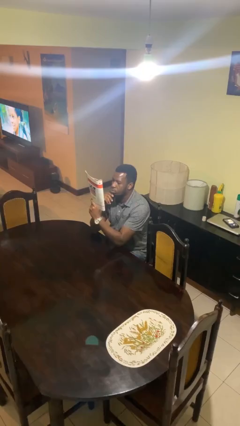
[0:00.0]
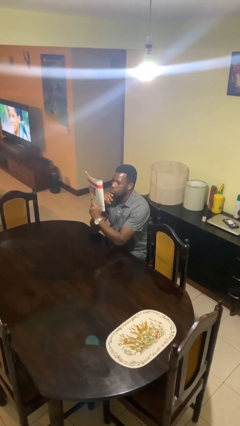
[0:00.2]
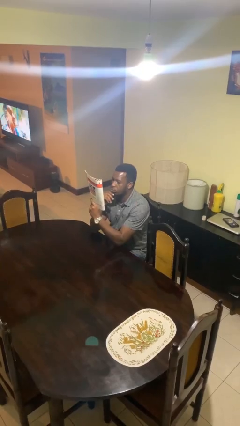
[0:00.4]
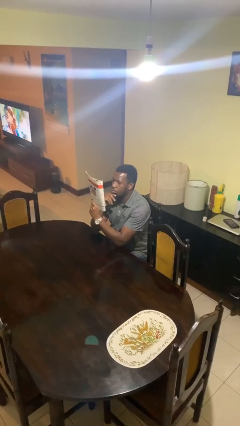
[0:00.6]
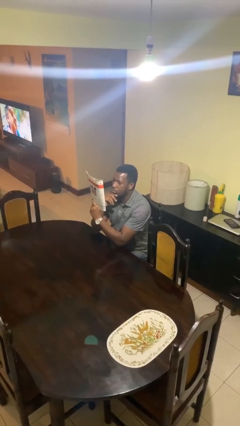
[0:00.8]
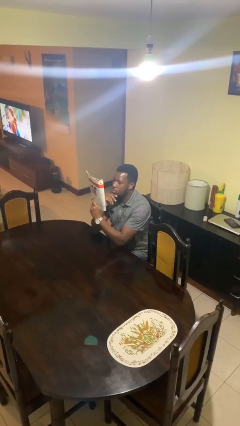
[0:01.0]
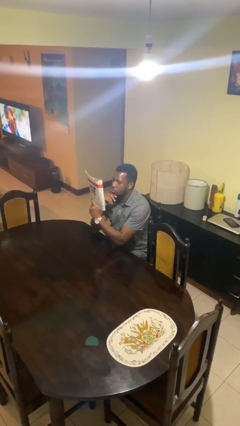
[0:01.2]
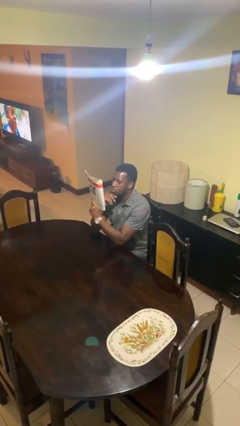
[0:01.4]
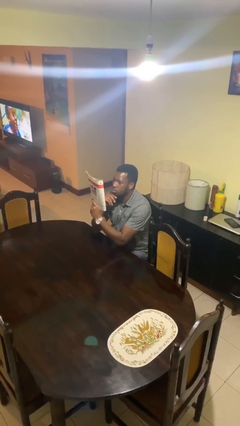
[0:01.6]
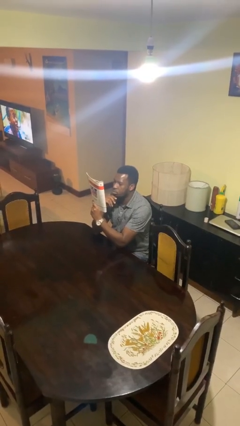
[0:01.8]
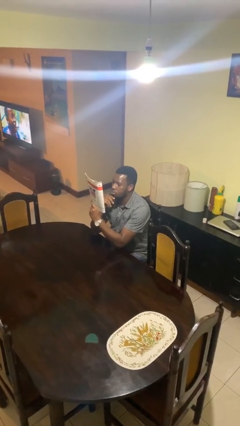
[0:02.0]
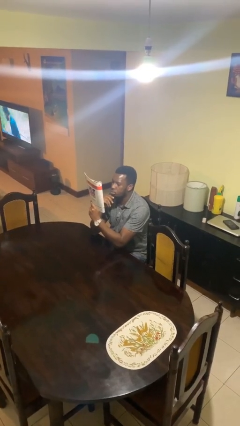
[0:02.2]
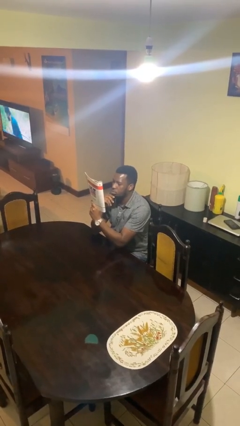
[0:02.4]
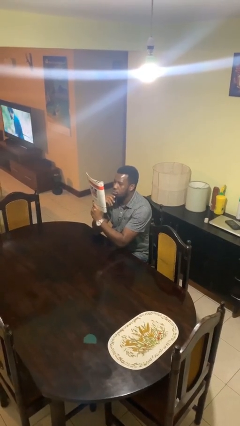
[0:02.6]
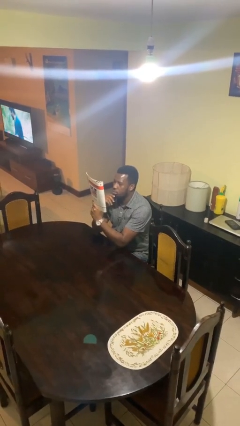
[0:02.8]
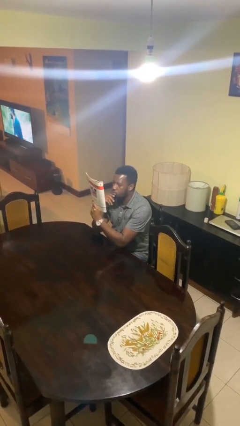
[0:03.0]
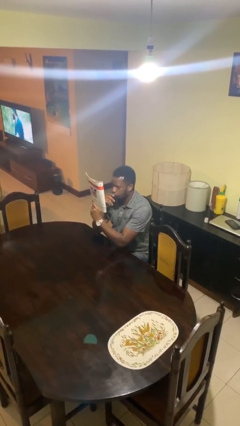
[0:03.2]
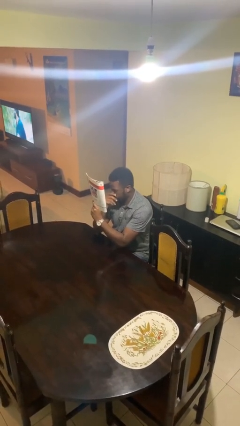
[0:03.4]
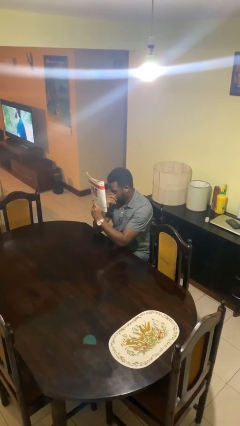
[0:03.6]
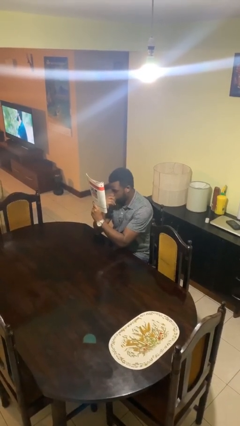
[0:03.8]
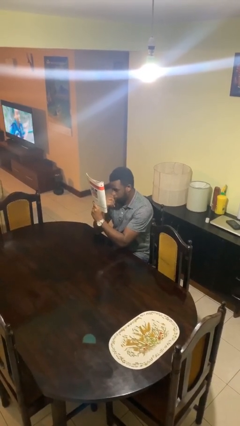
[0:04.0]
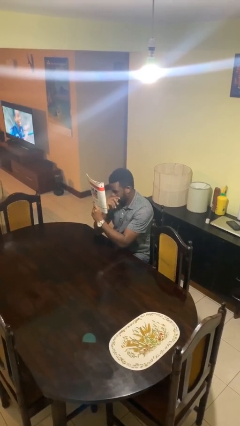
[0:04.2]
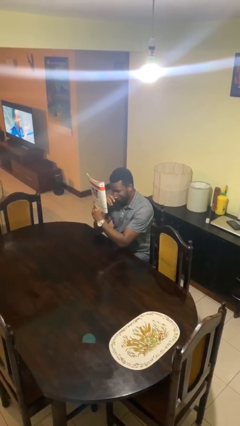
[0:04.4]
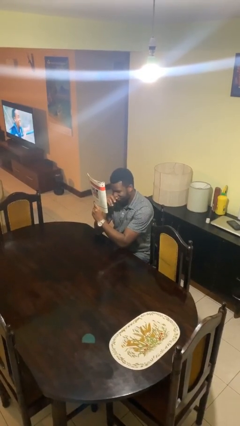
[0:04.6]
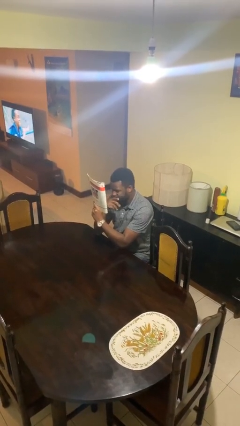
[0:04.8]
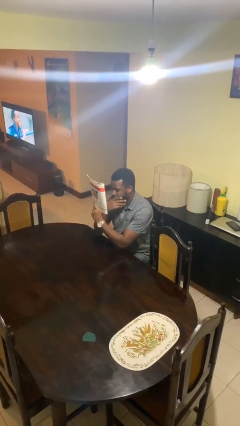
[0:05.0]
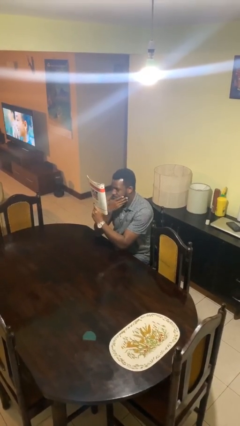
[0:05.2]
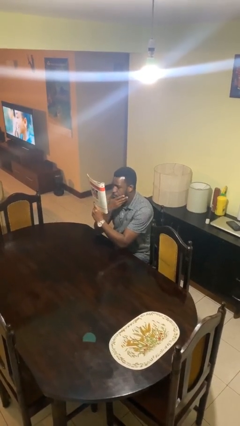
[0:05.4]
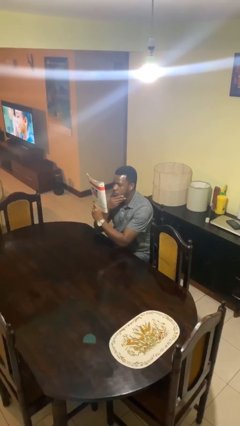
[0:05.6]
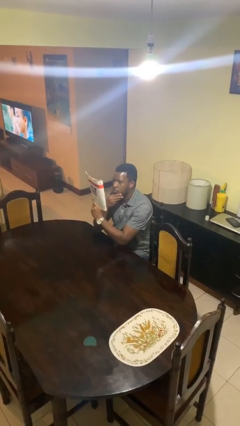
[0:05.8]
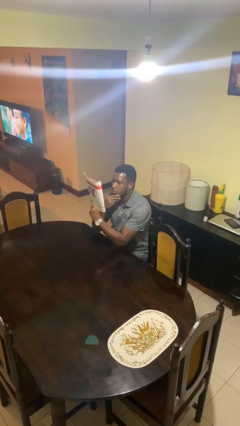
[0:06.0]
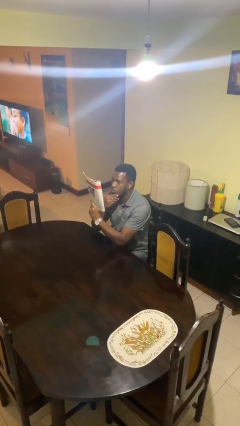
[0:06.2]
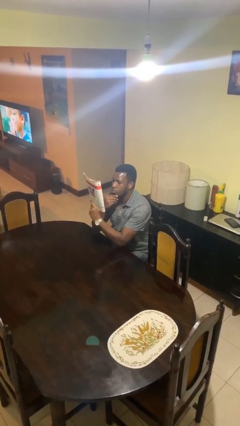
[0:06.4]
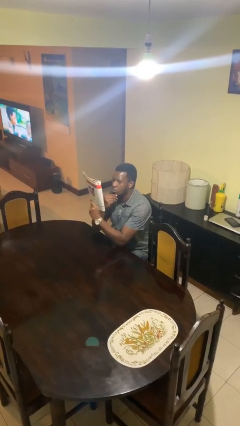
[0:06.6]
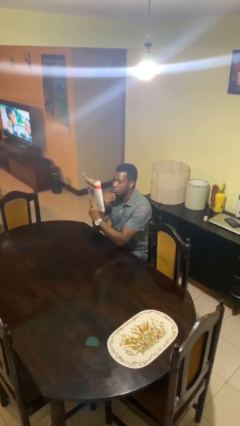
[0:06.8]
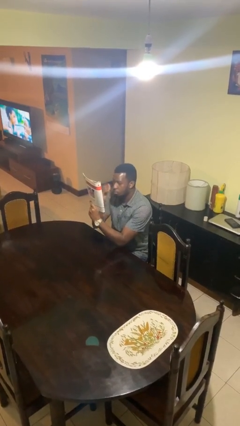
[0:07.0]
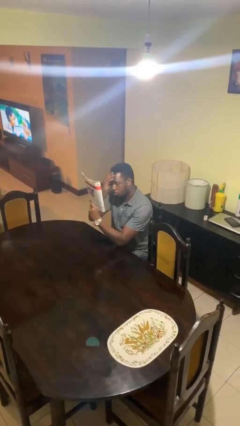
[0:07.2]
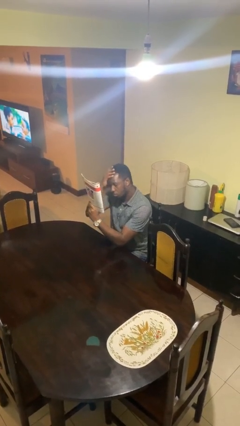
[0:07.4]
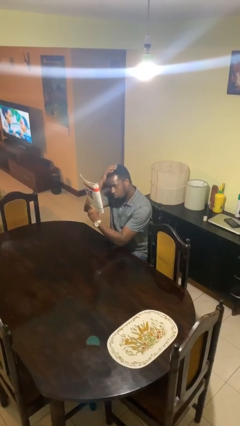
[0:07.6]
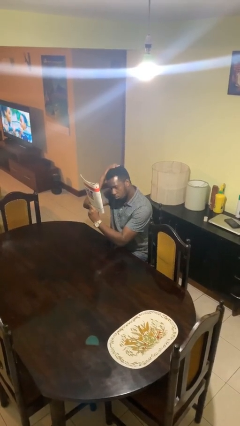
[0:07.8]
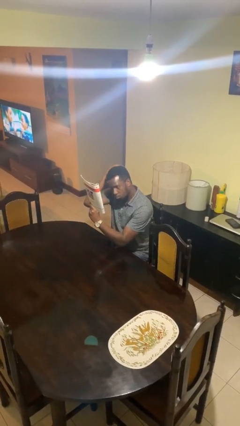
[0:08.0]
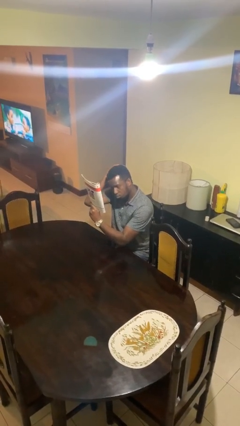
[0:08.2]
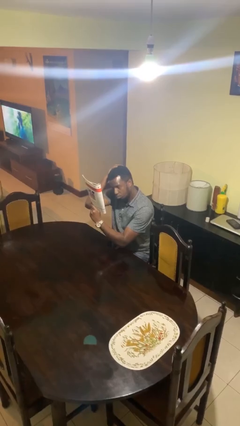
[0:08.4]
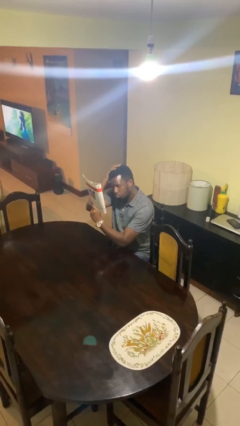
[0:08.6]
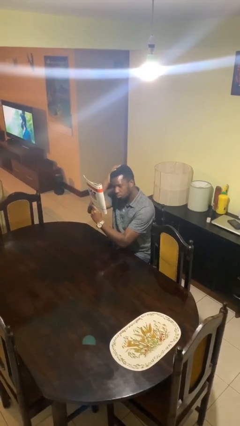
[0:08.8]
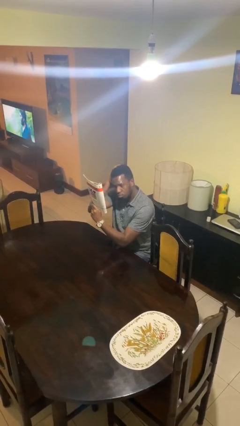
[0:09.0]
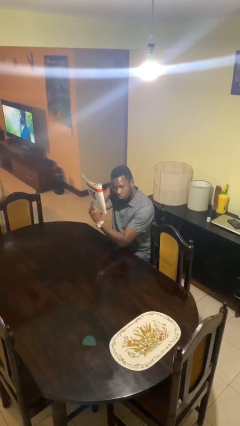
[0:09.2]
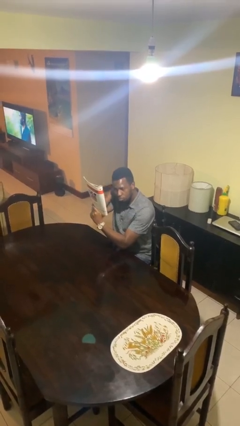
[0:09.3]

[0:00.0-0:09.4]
person reads document

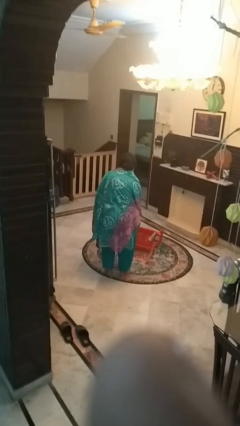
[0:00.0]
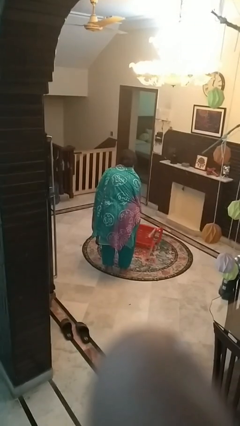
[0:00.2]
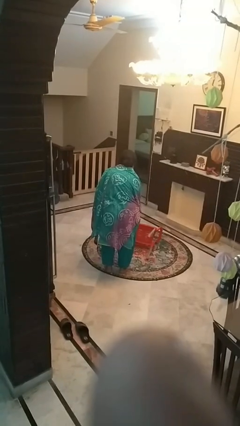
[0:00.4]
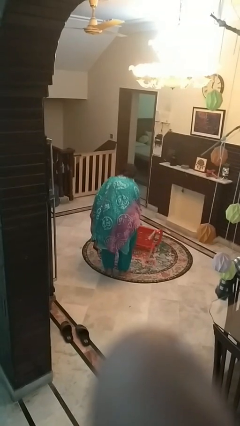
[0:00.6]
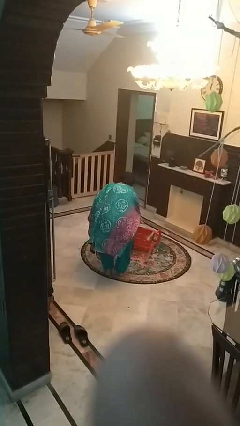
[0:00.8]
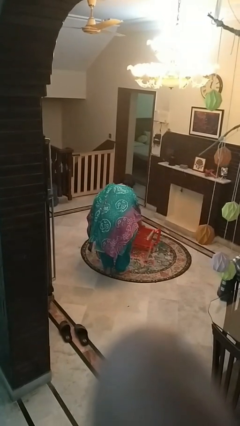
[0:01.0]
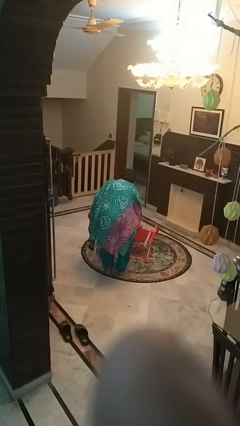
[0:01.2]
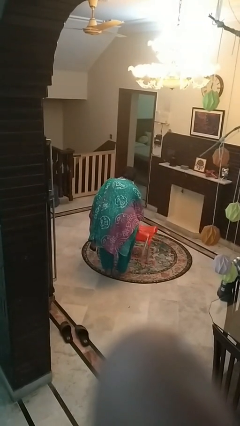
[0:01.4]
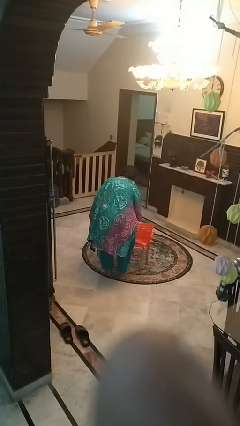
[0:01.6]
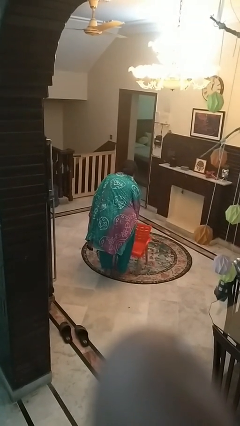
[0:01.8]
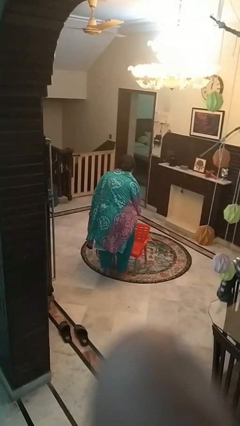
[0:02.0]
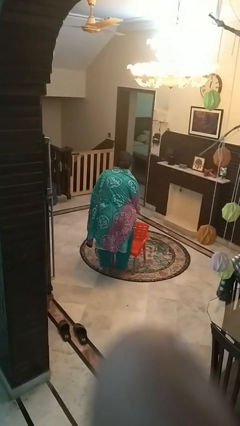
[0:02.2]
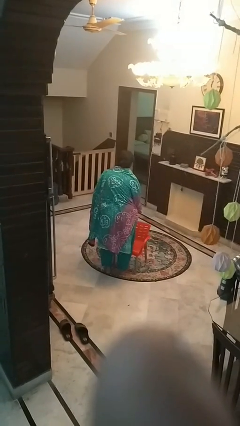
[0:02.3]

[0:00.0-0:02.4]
person sets upright furniture

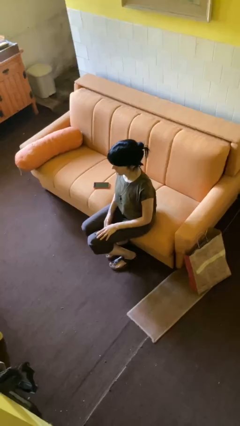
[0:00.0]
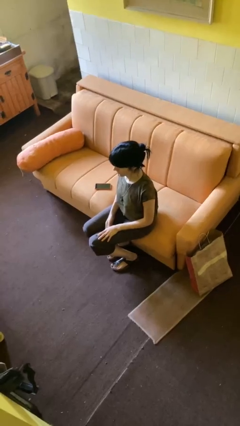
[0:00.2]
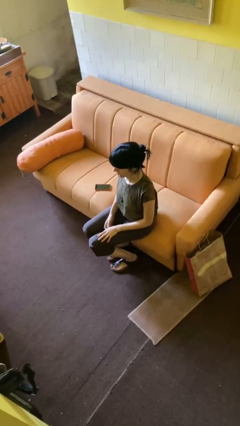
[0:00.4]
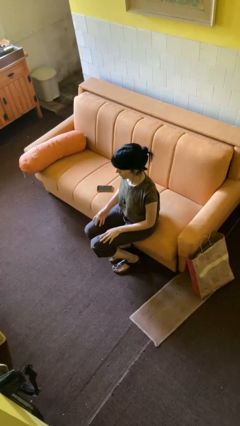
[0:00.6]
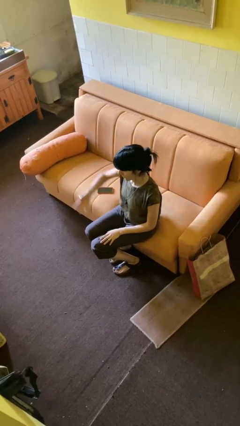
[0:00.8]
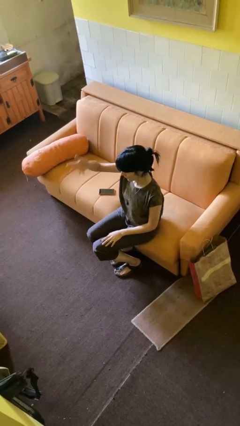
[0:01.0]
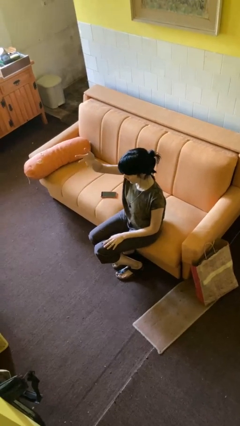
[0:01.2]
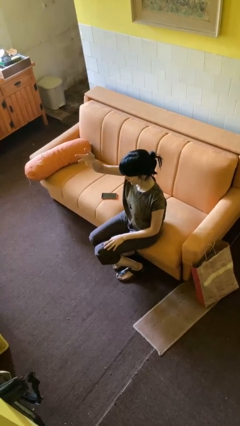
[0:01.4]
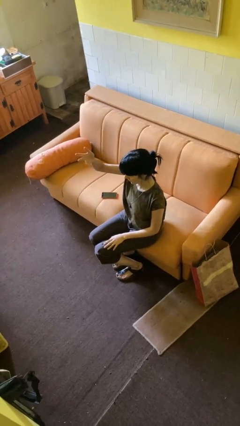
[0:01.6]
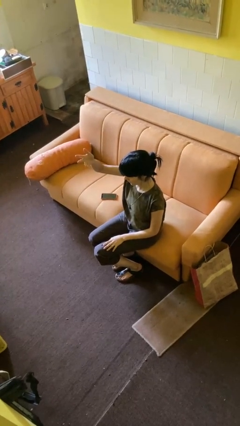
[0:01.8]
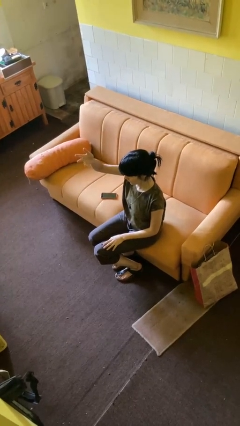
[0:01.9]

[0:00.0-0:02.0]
person gestures swipe up

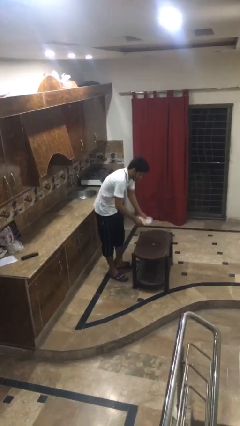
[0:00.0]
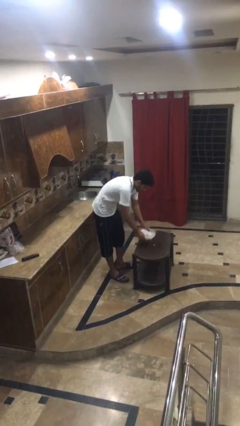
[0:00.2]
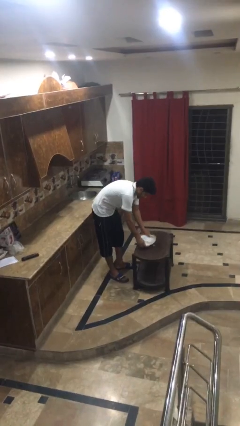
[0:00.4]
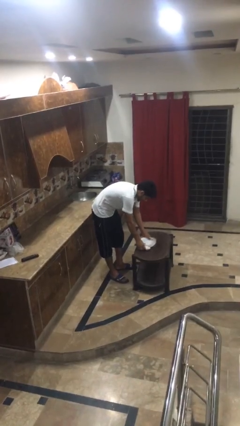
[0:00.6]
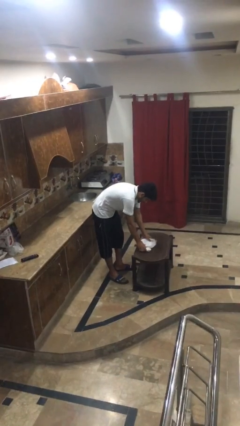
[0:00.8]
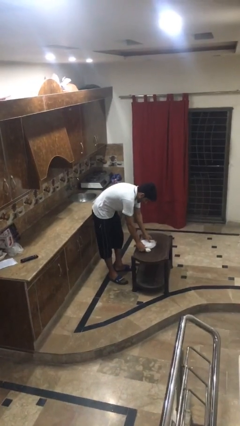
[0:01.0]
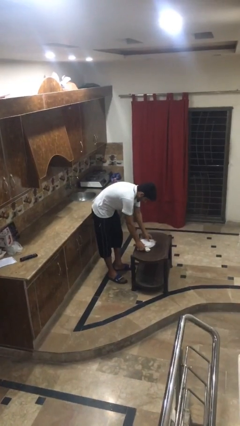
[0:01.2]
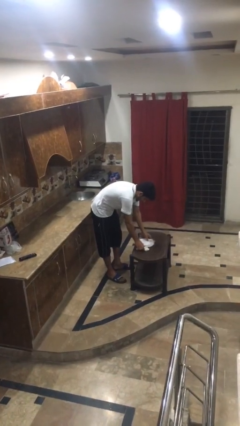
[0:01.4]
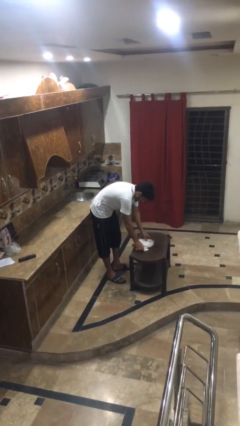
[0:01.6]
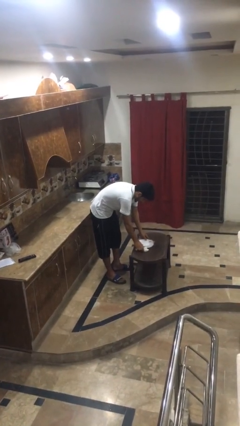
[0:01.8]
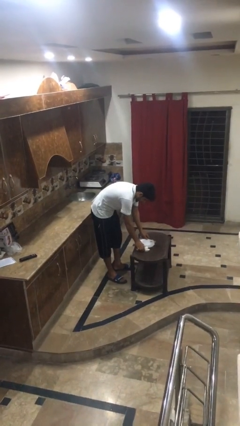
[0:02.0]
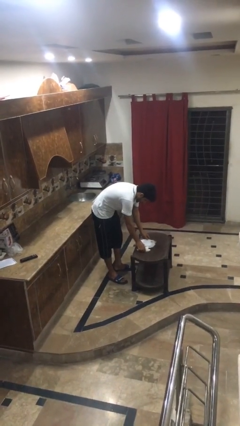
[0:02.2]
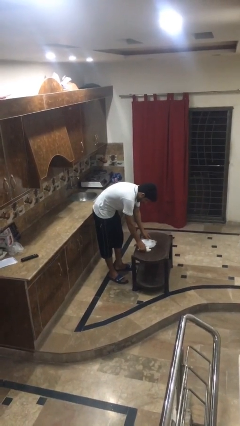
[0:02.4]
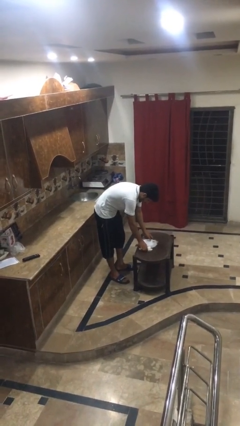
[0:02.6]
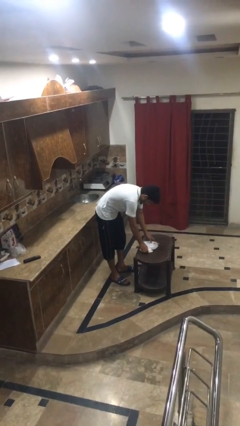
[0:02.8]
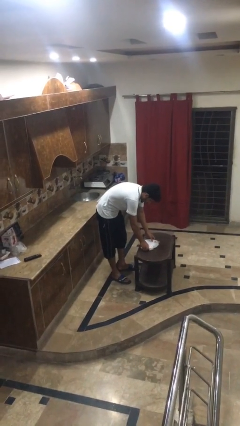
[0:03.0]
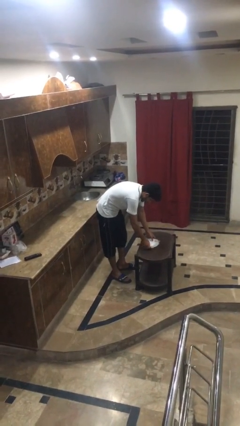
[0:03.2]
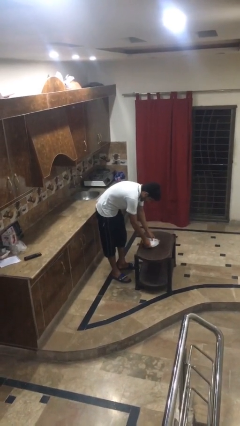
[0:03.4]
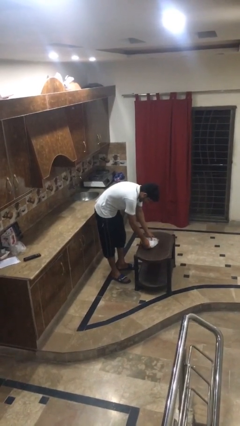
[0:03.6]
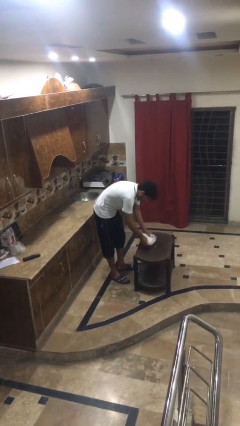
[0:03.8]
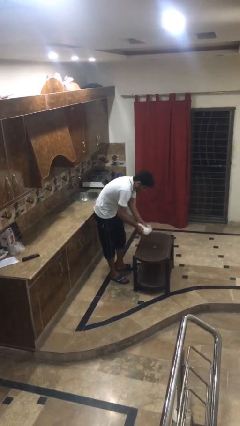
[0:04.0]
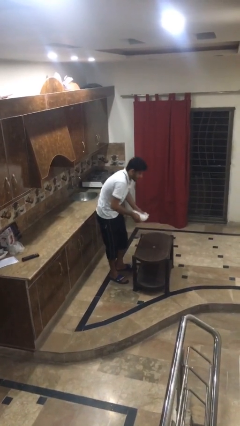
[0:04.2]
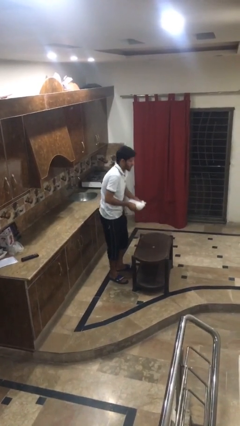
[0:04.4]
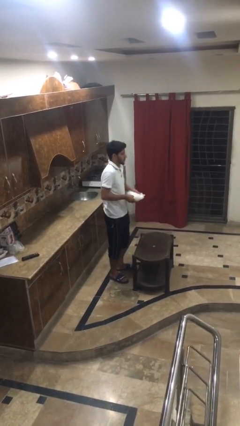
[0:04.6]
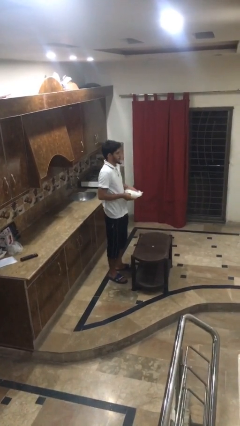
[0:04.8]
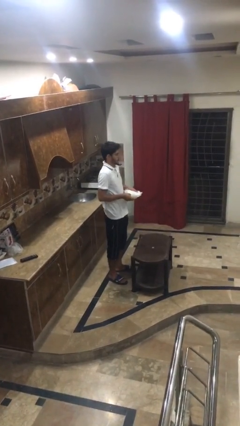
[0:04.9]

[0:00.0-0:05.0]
person sets table
